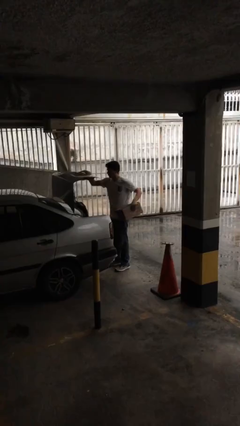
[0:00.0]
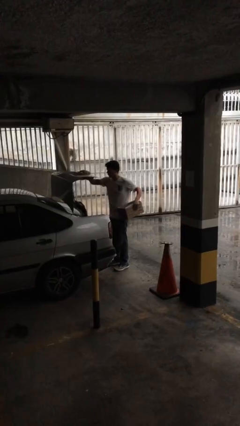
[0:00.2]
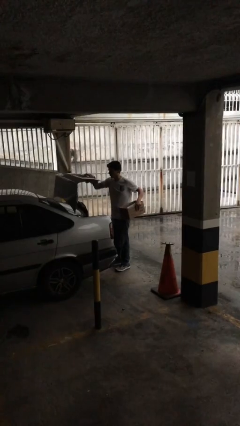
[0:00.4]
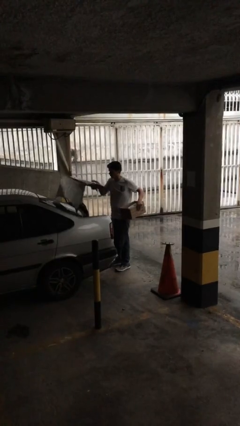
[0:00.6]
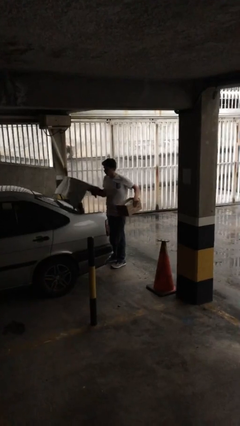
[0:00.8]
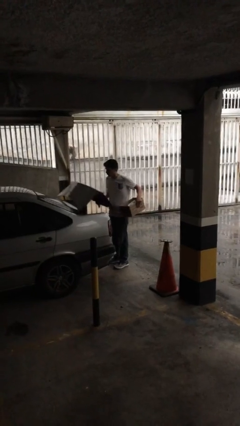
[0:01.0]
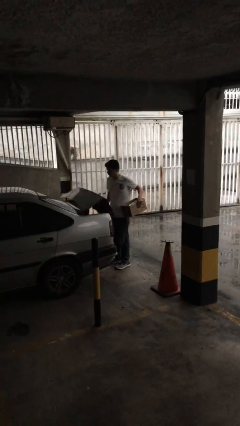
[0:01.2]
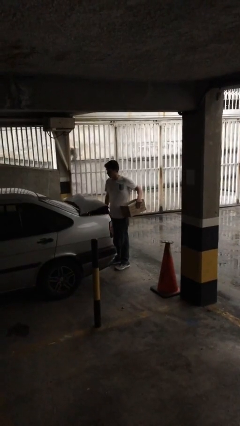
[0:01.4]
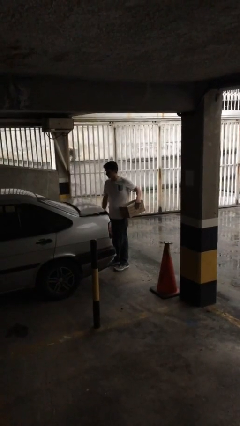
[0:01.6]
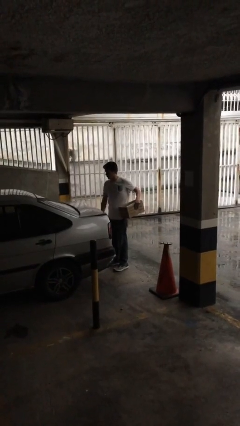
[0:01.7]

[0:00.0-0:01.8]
person closes car trunk

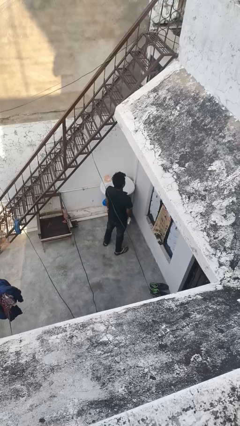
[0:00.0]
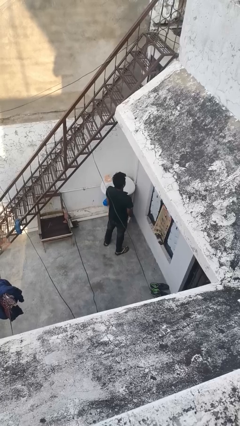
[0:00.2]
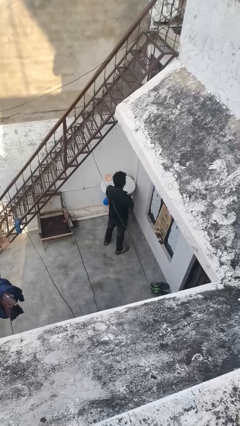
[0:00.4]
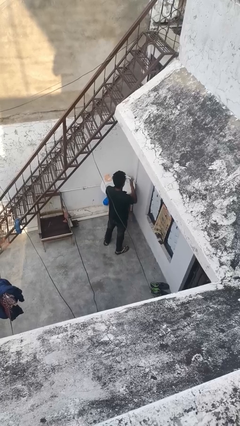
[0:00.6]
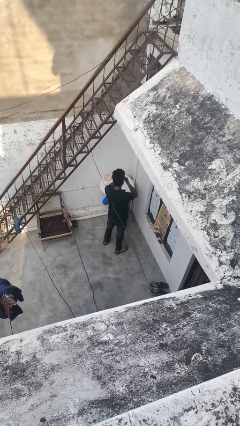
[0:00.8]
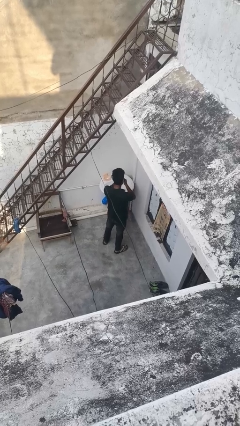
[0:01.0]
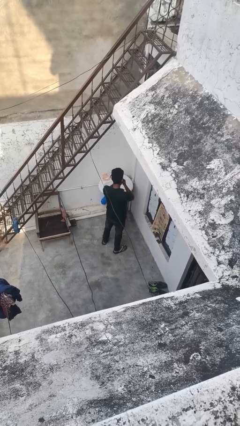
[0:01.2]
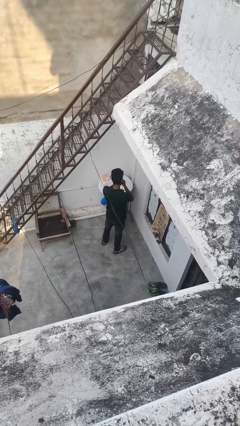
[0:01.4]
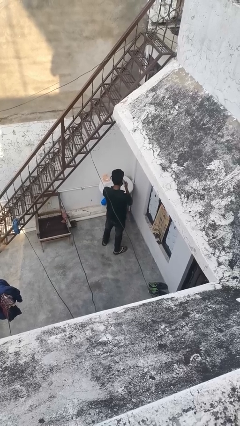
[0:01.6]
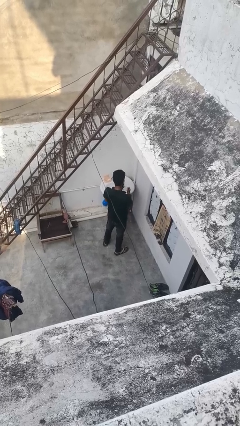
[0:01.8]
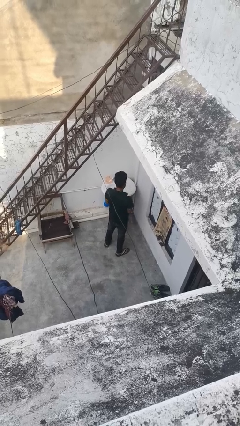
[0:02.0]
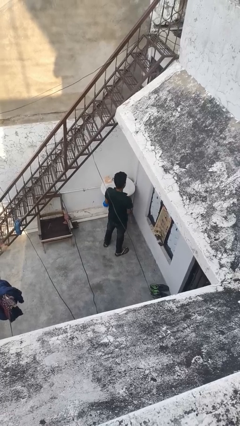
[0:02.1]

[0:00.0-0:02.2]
person blows nose

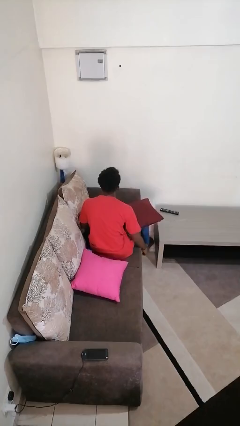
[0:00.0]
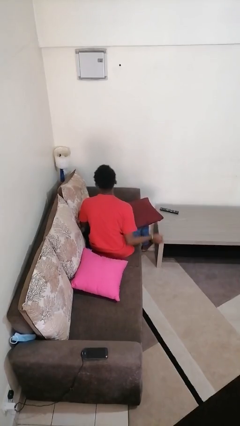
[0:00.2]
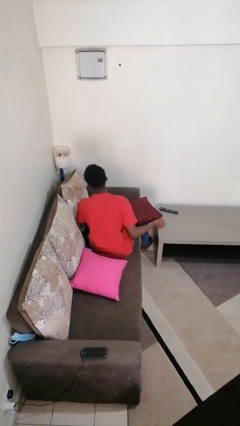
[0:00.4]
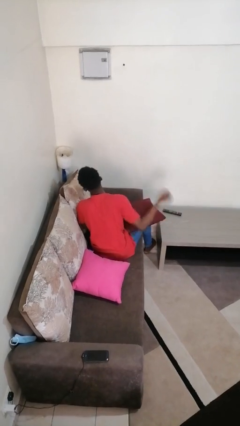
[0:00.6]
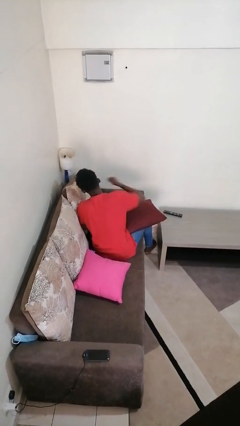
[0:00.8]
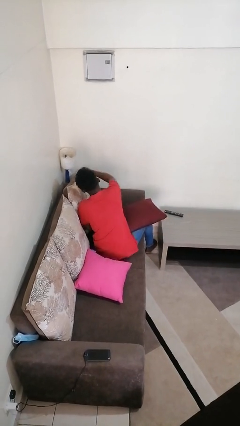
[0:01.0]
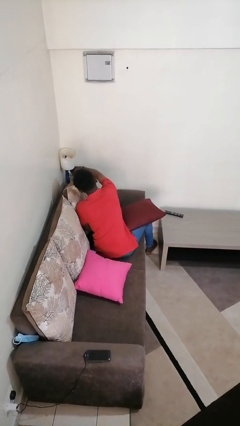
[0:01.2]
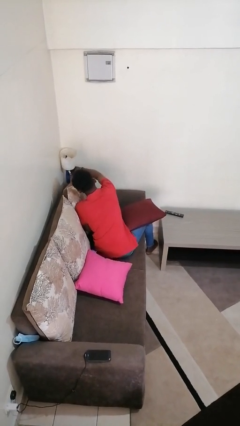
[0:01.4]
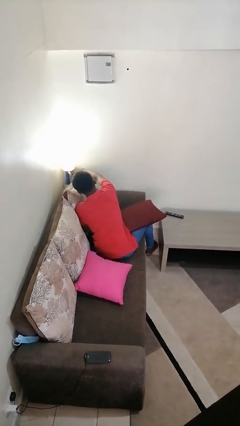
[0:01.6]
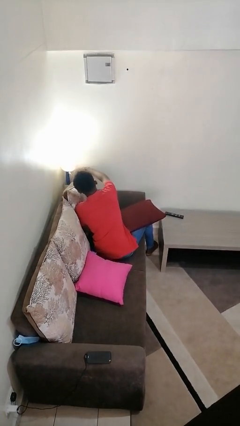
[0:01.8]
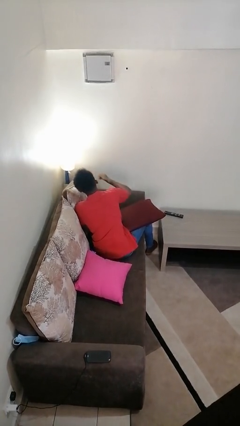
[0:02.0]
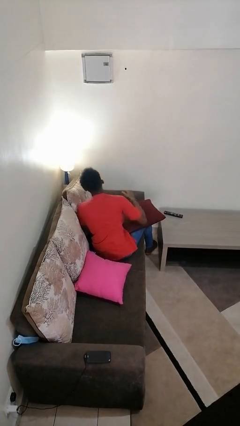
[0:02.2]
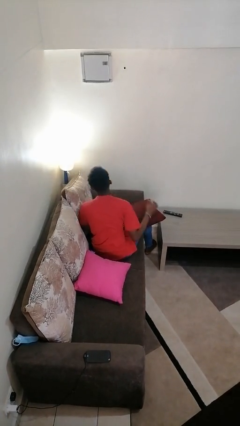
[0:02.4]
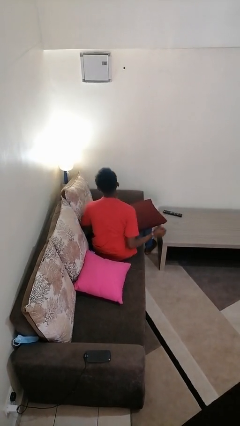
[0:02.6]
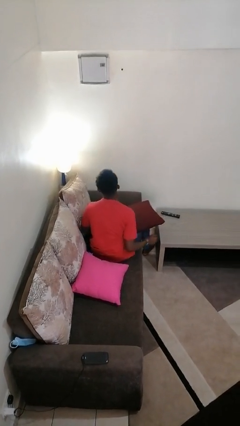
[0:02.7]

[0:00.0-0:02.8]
person turns on lamp

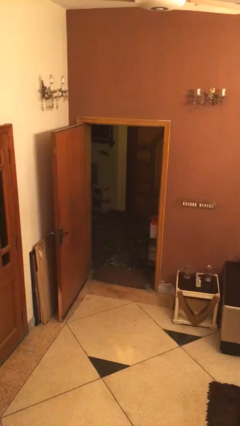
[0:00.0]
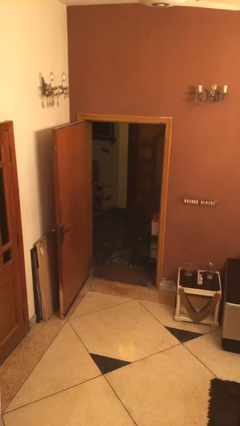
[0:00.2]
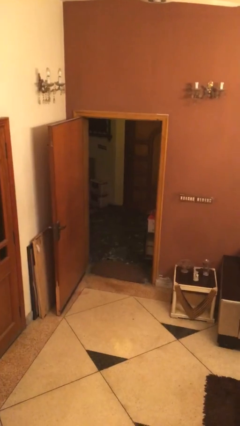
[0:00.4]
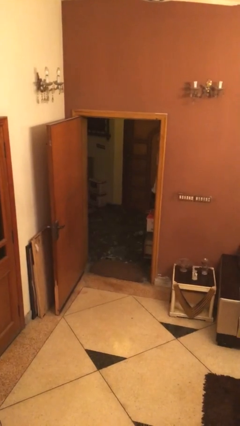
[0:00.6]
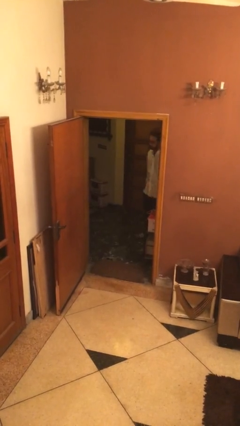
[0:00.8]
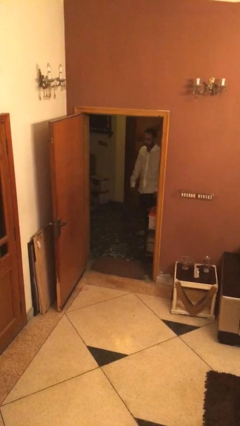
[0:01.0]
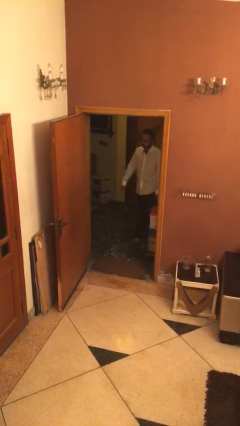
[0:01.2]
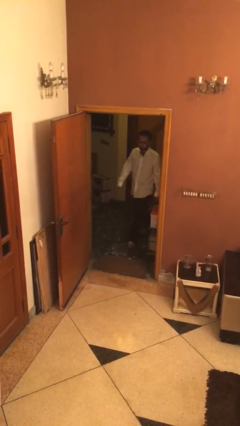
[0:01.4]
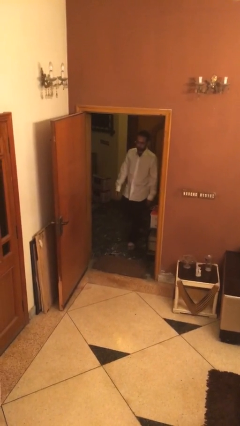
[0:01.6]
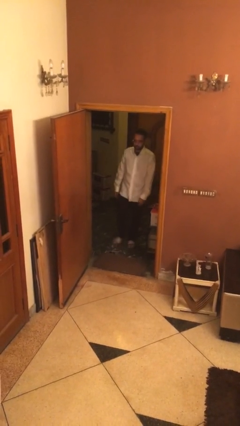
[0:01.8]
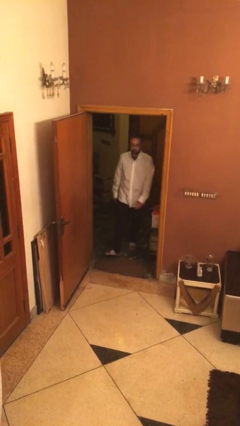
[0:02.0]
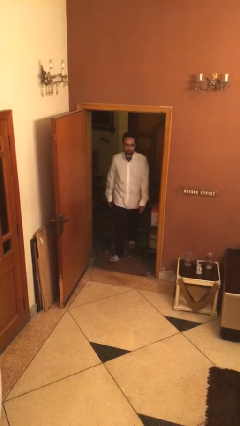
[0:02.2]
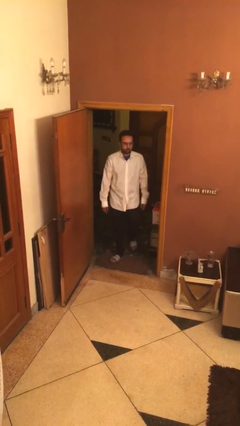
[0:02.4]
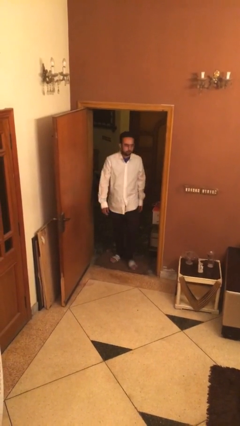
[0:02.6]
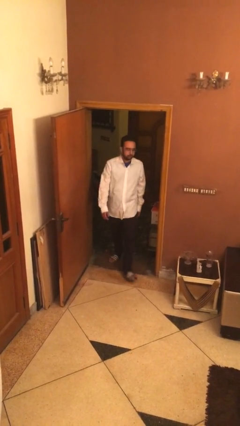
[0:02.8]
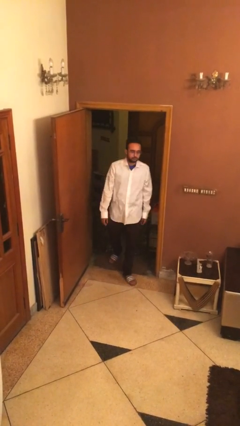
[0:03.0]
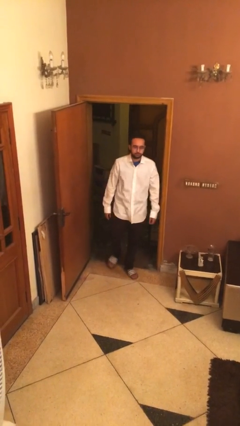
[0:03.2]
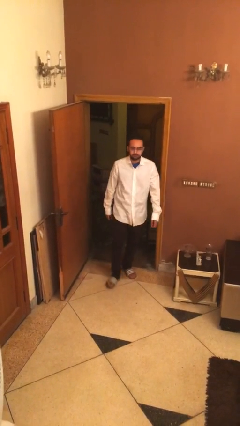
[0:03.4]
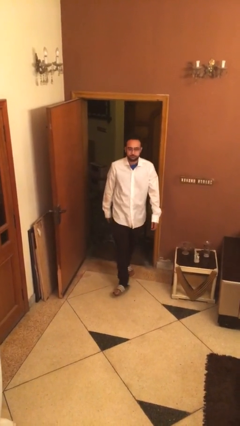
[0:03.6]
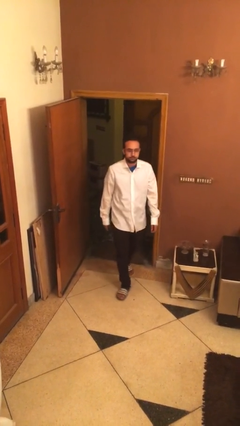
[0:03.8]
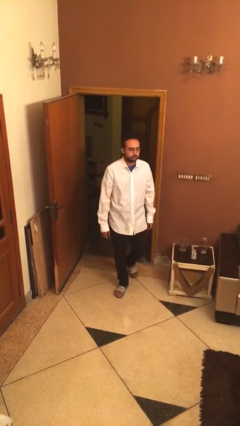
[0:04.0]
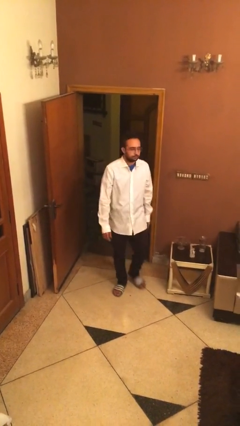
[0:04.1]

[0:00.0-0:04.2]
person enters scene through structure

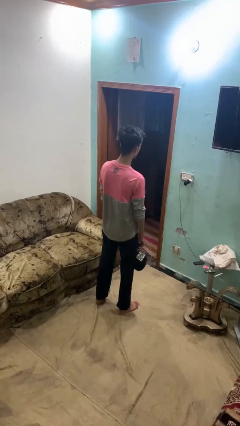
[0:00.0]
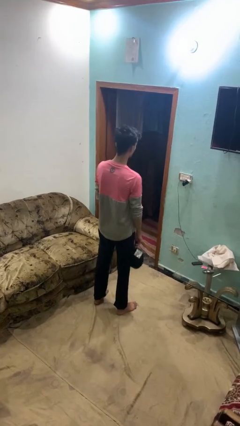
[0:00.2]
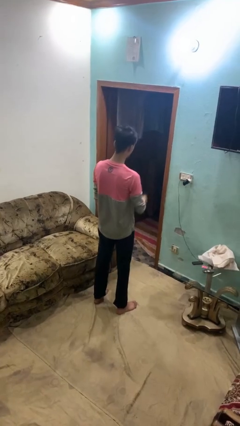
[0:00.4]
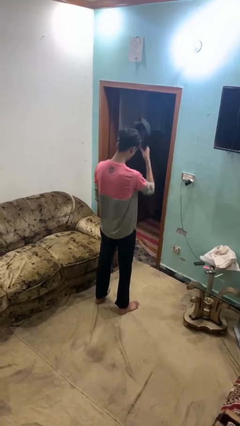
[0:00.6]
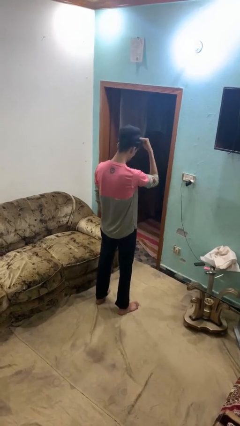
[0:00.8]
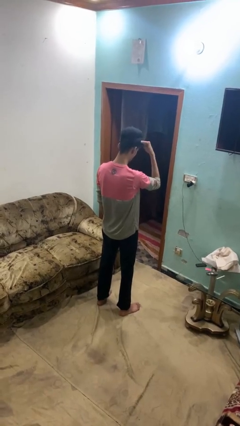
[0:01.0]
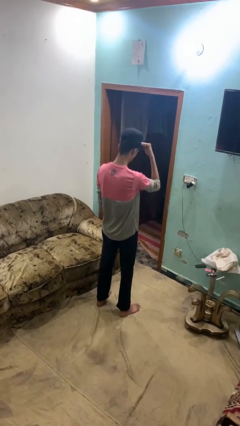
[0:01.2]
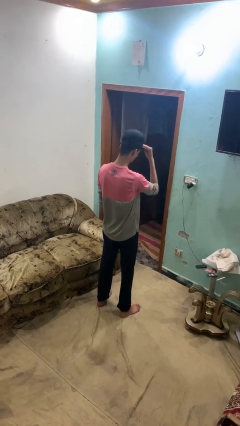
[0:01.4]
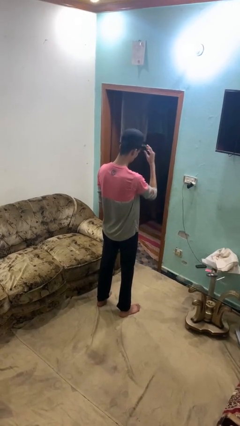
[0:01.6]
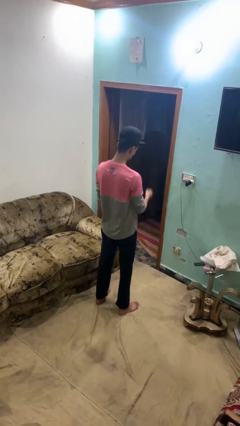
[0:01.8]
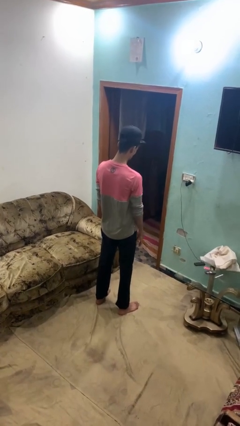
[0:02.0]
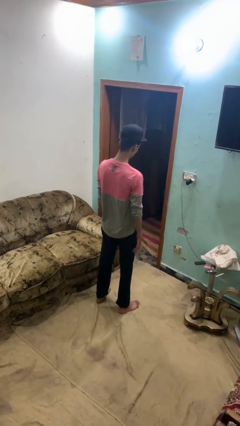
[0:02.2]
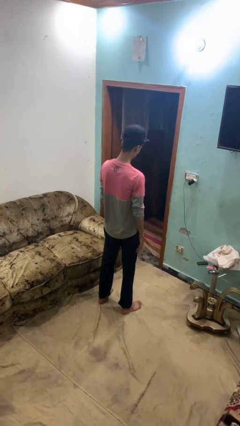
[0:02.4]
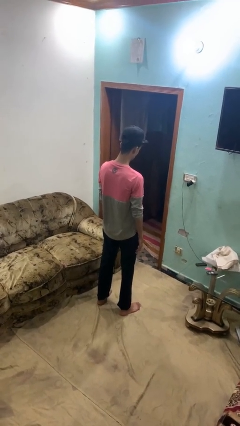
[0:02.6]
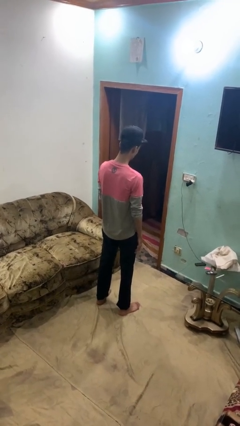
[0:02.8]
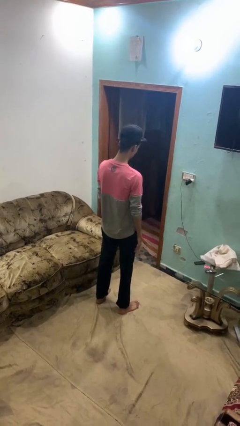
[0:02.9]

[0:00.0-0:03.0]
person puts on hat

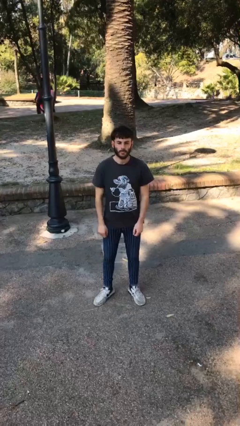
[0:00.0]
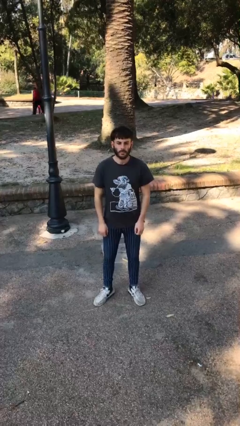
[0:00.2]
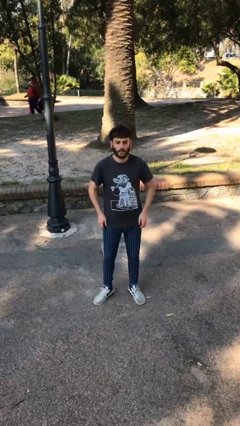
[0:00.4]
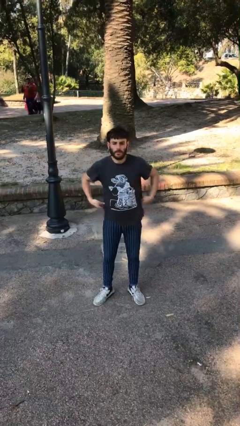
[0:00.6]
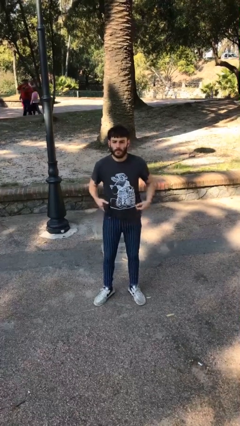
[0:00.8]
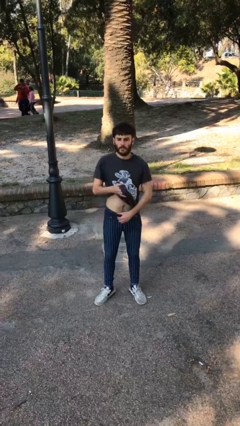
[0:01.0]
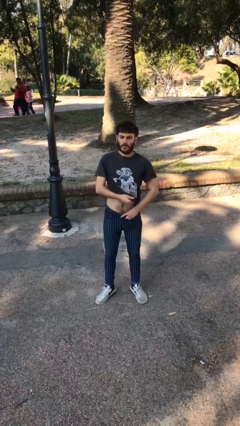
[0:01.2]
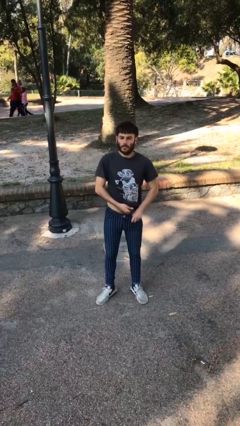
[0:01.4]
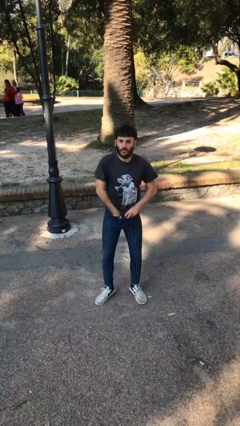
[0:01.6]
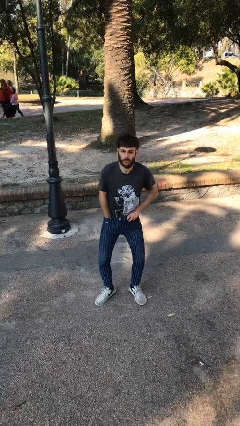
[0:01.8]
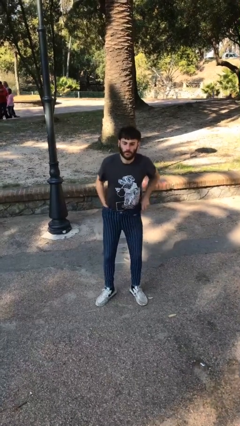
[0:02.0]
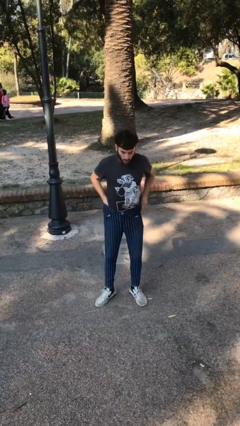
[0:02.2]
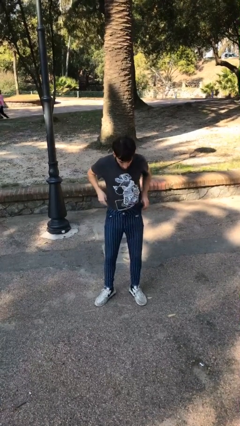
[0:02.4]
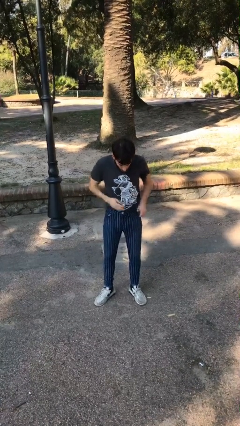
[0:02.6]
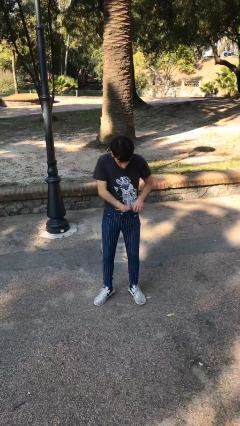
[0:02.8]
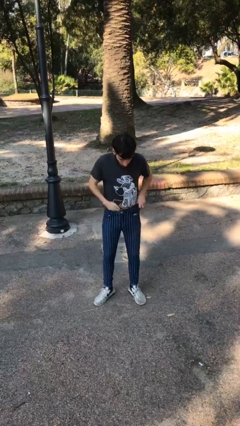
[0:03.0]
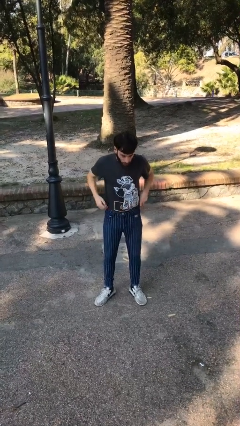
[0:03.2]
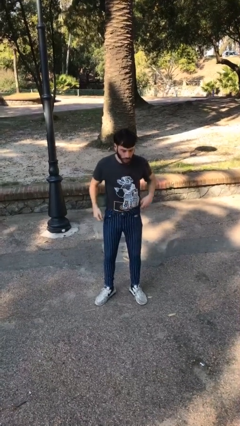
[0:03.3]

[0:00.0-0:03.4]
person tucks in shirt
